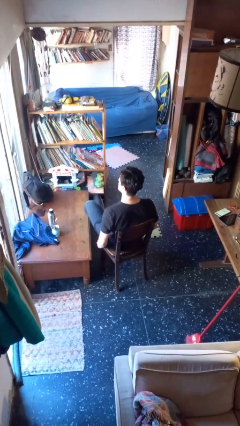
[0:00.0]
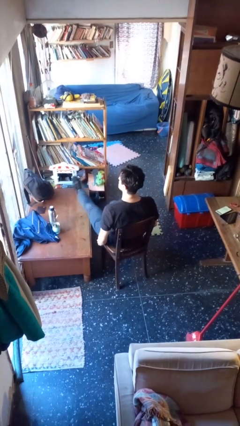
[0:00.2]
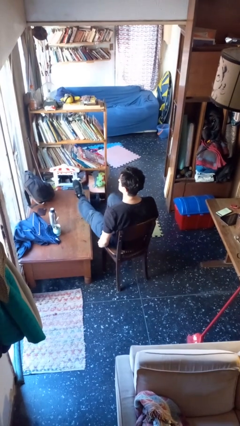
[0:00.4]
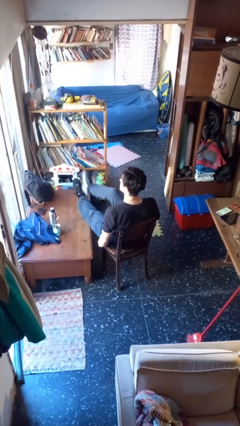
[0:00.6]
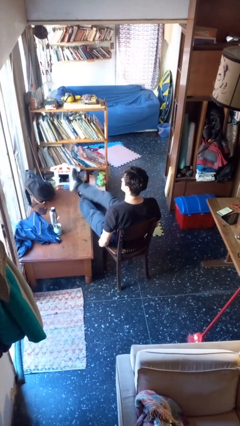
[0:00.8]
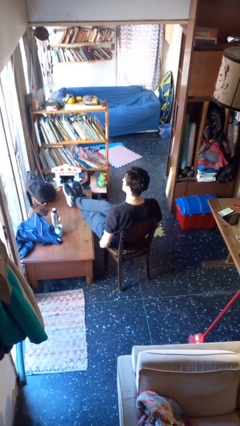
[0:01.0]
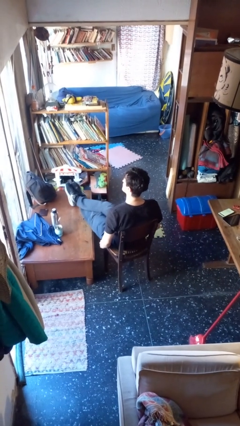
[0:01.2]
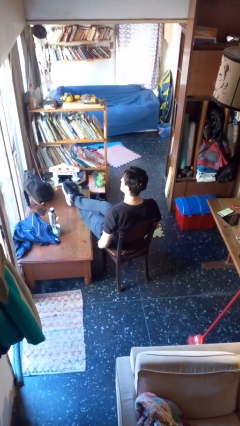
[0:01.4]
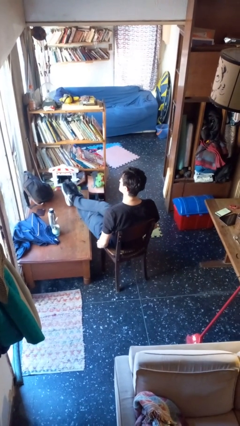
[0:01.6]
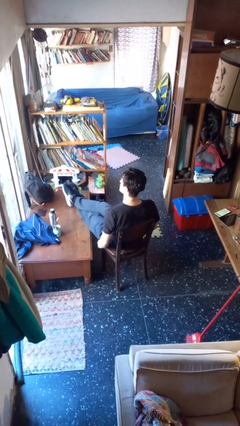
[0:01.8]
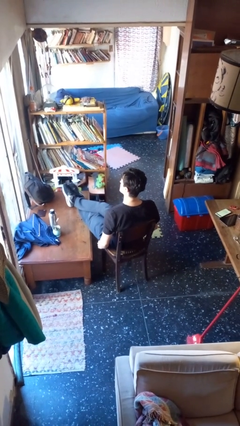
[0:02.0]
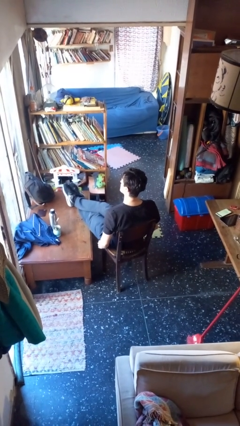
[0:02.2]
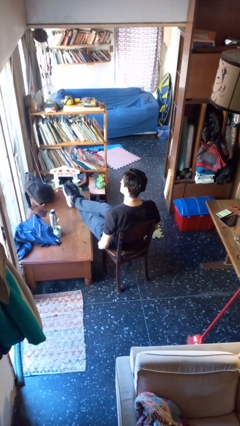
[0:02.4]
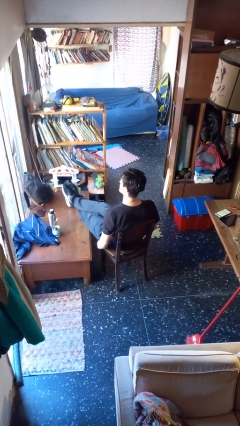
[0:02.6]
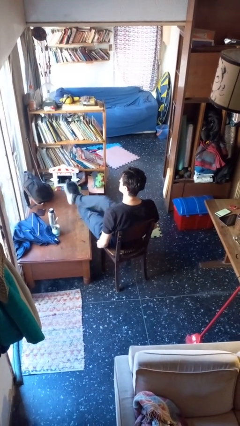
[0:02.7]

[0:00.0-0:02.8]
person puts feet up

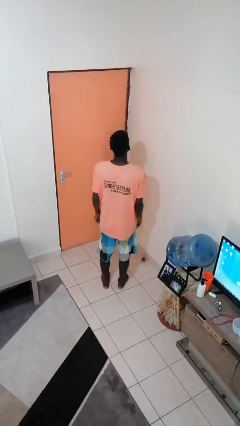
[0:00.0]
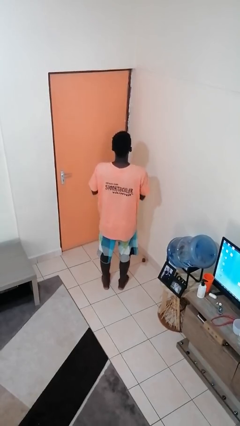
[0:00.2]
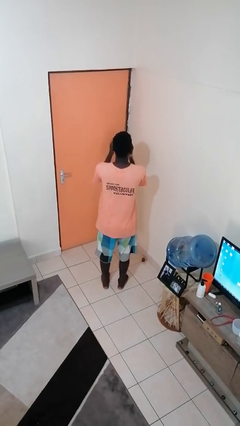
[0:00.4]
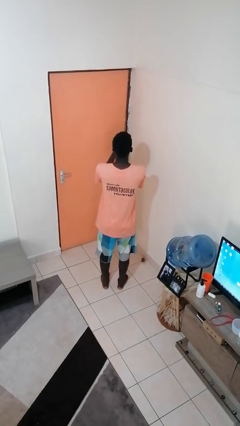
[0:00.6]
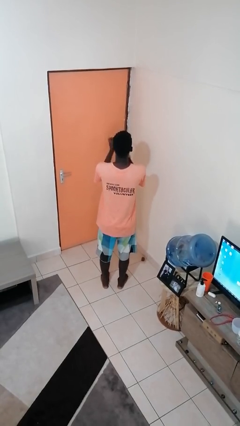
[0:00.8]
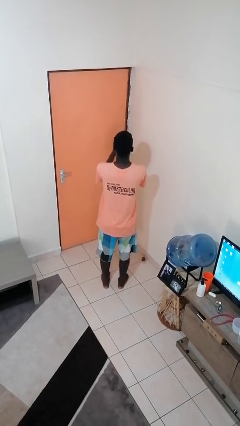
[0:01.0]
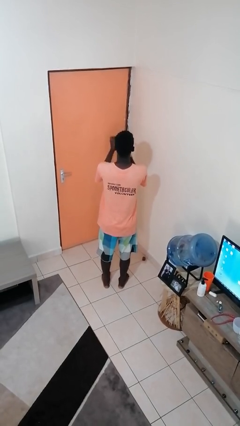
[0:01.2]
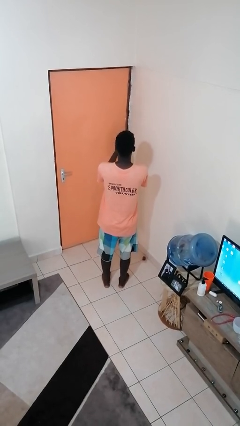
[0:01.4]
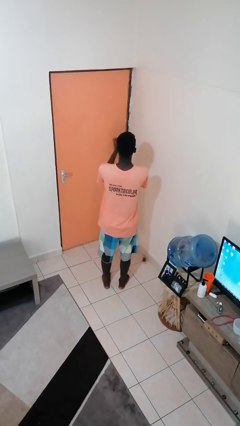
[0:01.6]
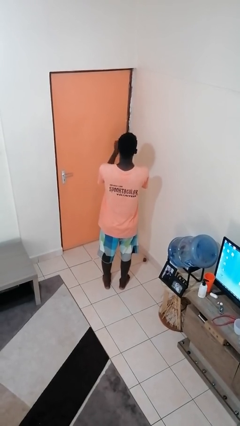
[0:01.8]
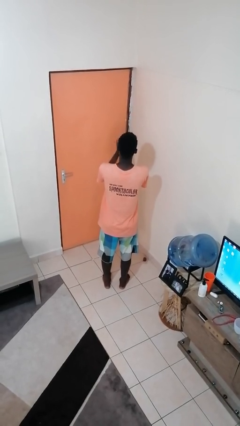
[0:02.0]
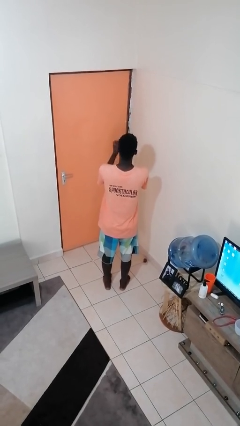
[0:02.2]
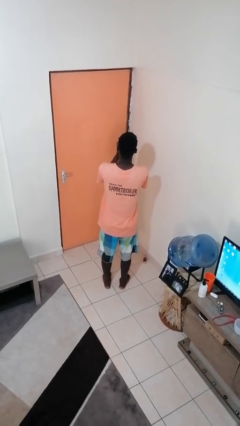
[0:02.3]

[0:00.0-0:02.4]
person claps hands

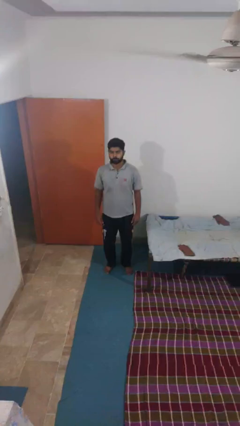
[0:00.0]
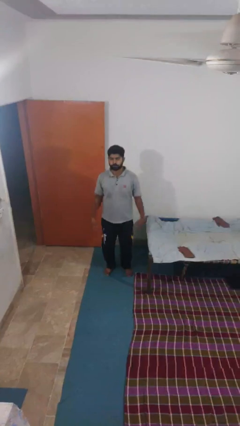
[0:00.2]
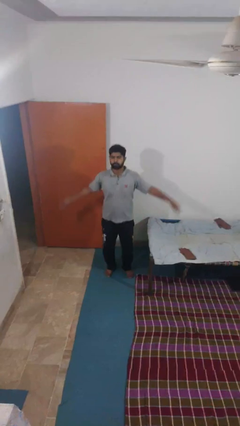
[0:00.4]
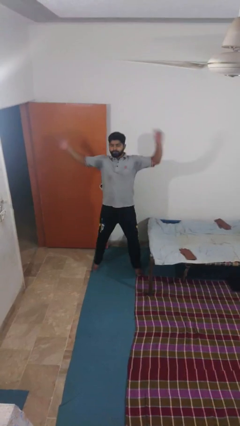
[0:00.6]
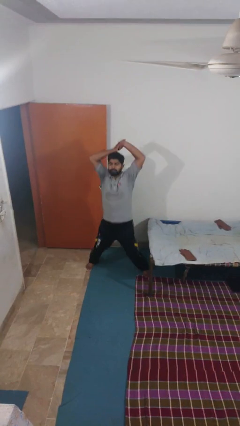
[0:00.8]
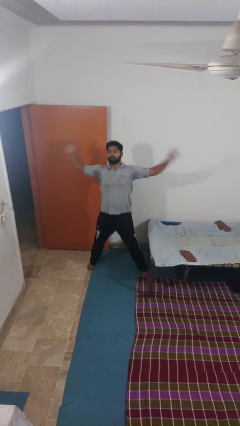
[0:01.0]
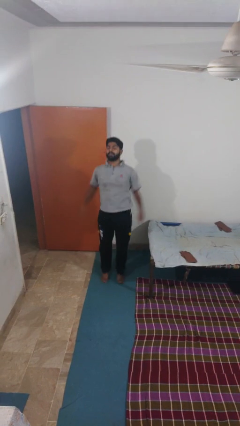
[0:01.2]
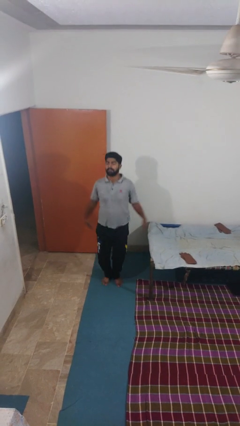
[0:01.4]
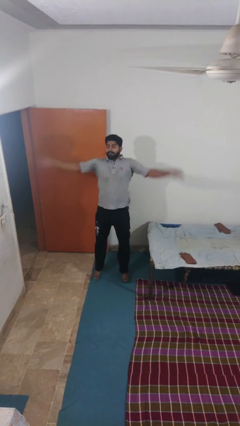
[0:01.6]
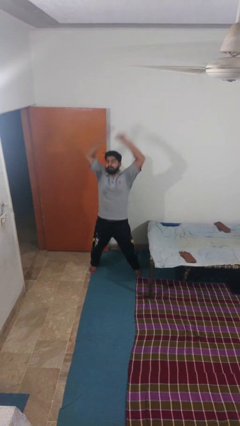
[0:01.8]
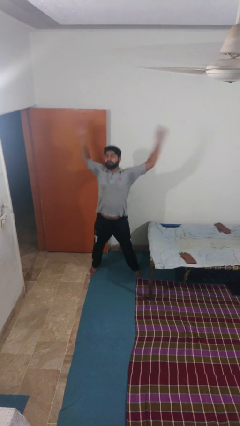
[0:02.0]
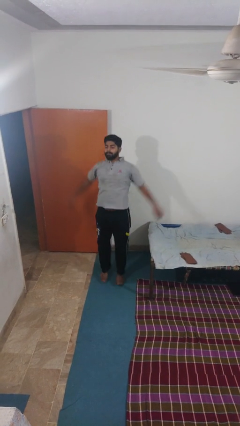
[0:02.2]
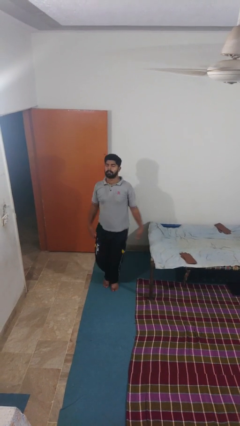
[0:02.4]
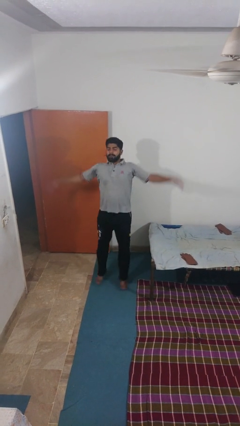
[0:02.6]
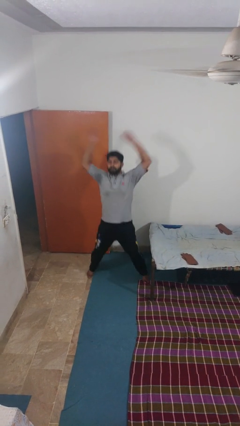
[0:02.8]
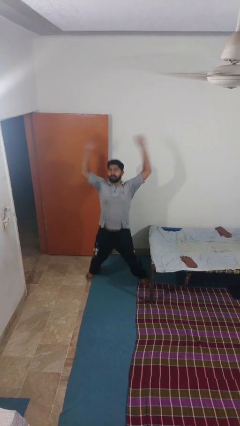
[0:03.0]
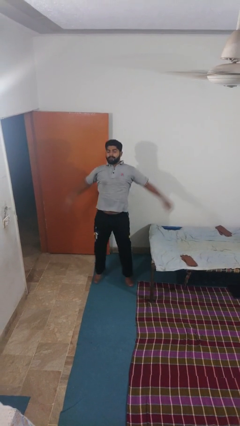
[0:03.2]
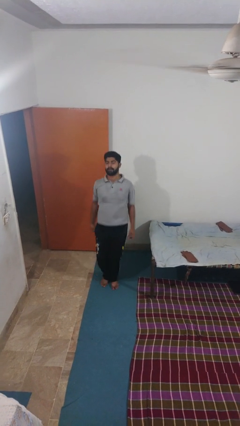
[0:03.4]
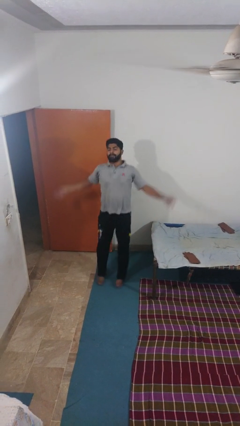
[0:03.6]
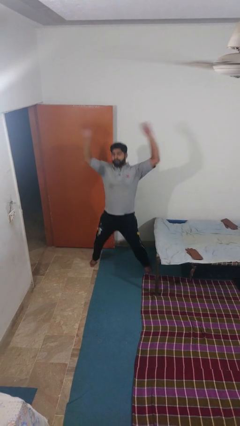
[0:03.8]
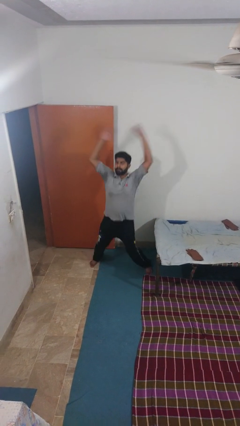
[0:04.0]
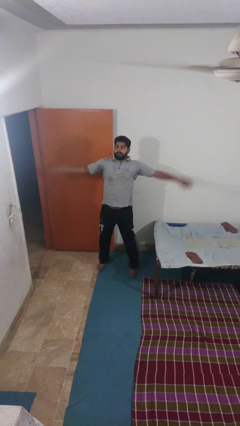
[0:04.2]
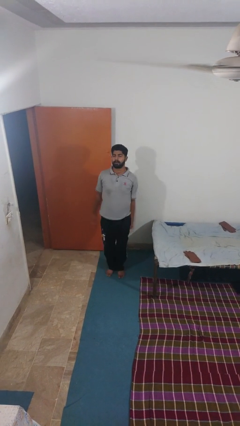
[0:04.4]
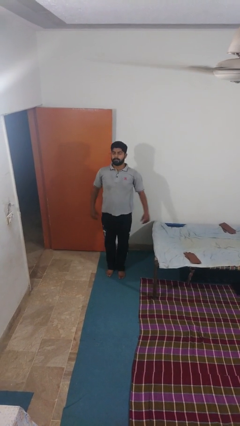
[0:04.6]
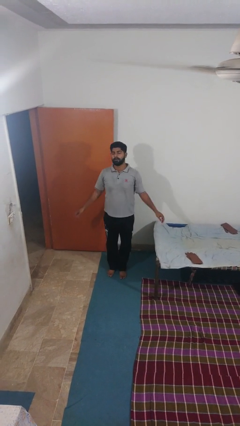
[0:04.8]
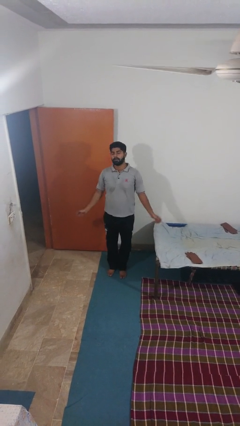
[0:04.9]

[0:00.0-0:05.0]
person exercises with jumping jacks

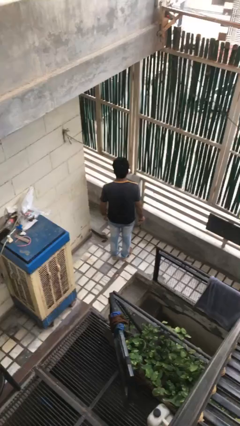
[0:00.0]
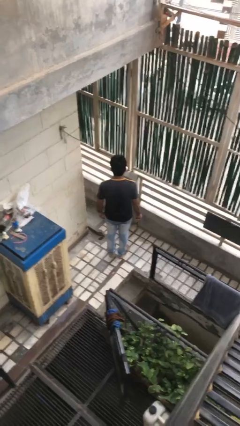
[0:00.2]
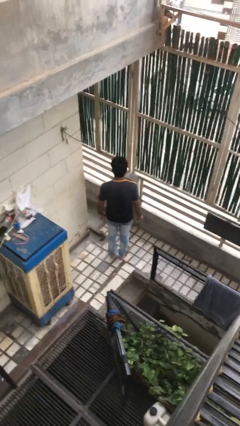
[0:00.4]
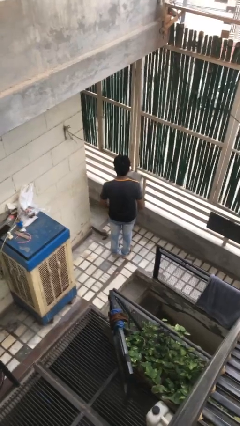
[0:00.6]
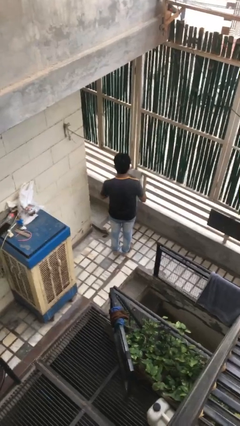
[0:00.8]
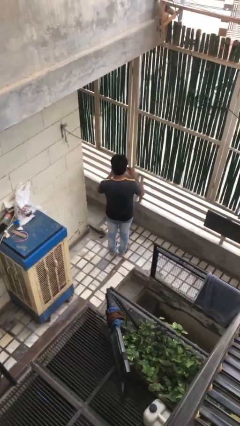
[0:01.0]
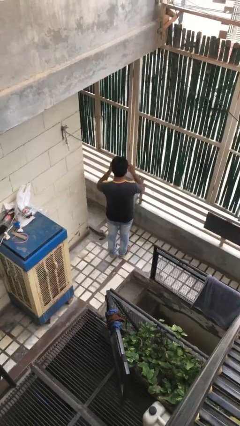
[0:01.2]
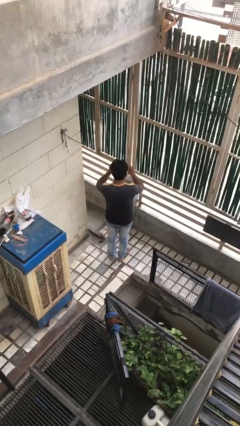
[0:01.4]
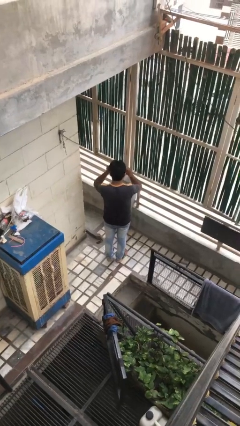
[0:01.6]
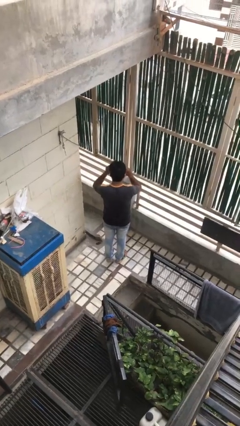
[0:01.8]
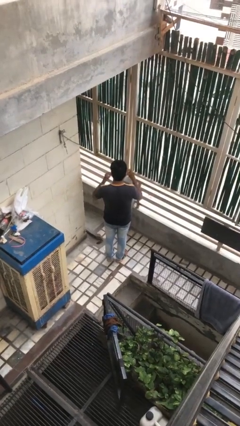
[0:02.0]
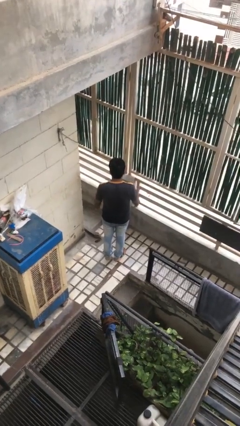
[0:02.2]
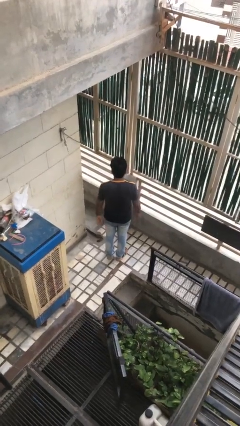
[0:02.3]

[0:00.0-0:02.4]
person puts on glasses

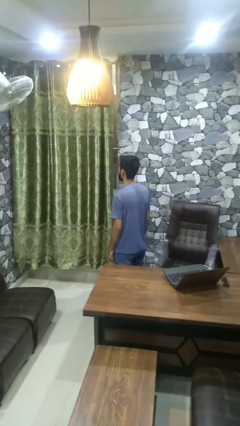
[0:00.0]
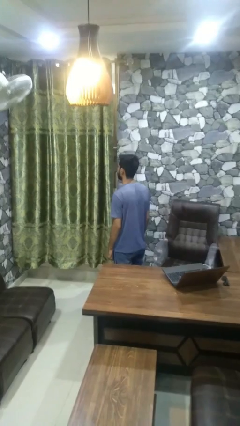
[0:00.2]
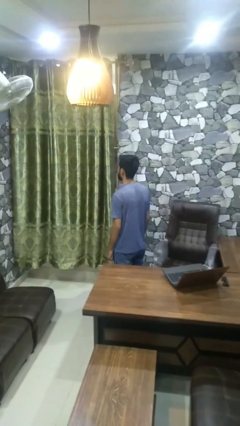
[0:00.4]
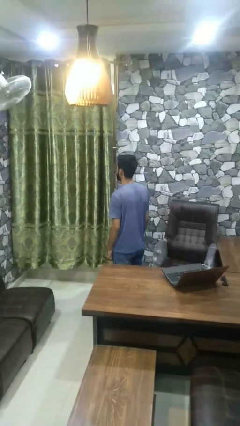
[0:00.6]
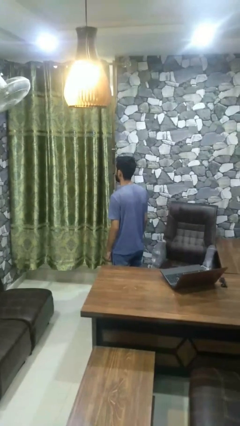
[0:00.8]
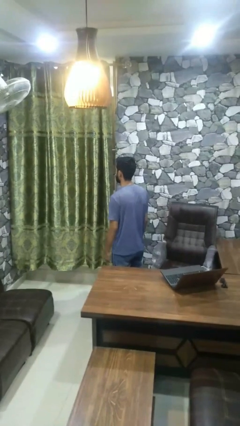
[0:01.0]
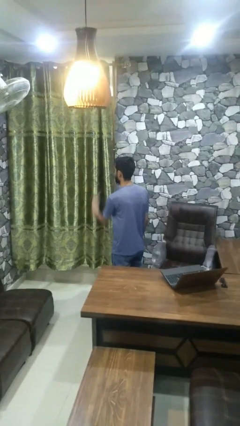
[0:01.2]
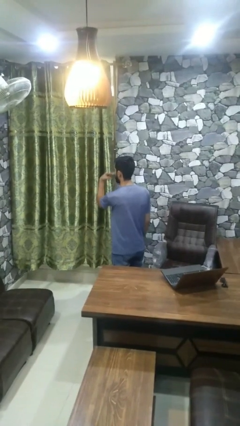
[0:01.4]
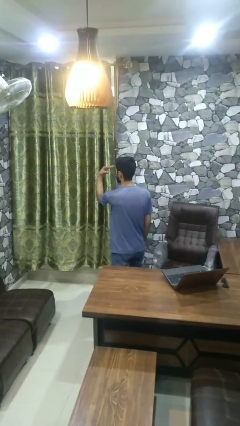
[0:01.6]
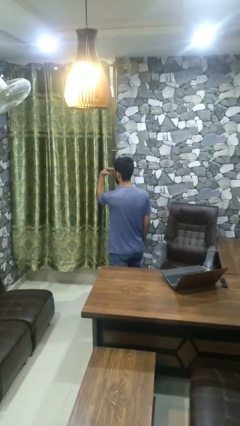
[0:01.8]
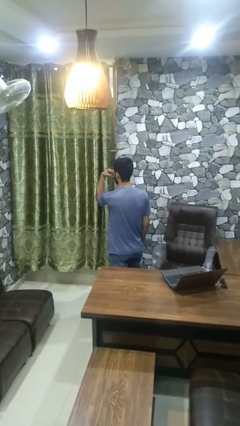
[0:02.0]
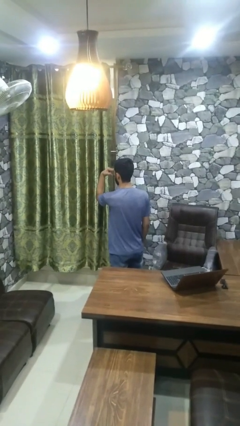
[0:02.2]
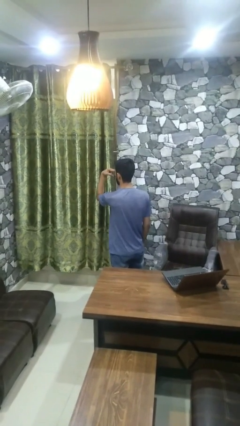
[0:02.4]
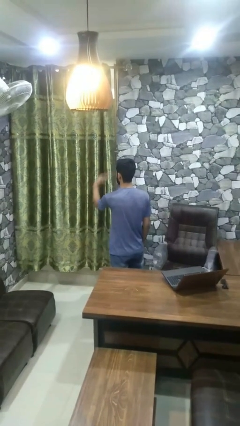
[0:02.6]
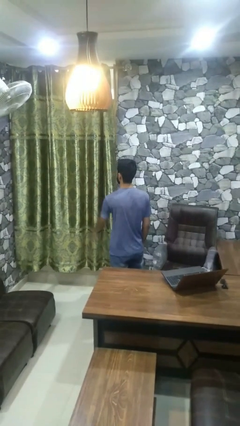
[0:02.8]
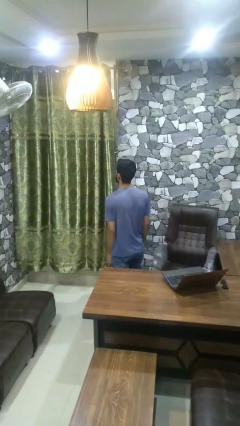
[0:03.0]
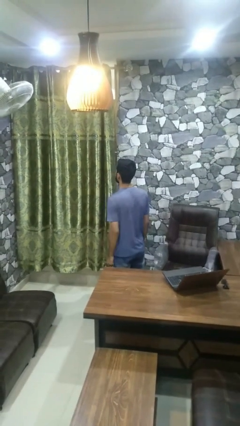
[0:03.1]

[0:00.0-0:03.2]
person gestures watch closely

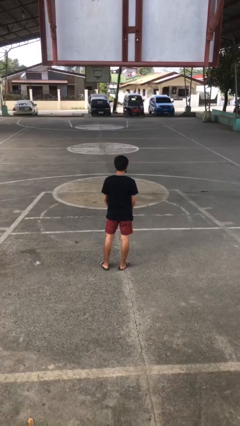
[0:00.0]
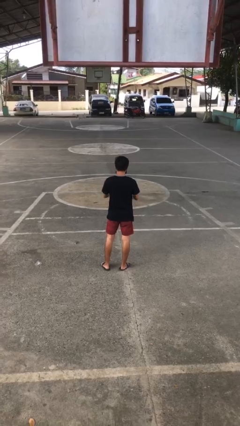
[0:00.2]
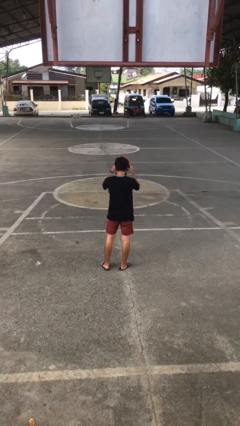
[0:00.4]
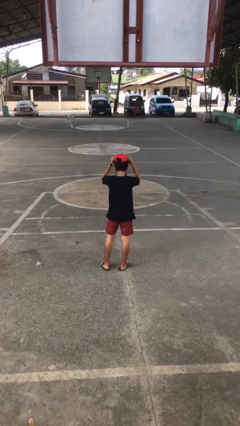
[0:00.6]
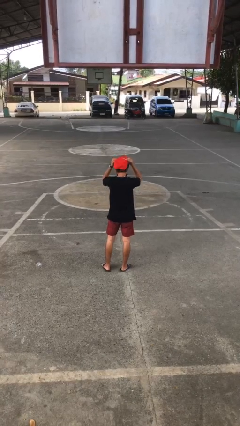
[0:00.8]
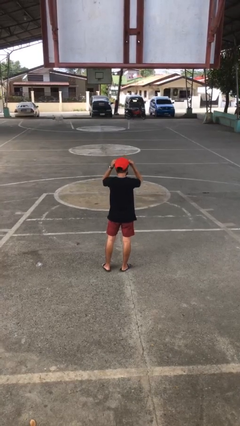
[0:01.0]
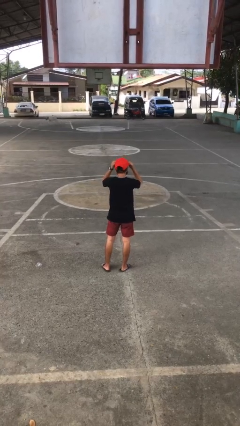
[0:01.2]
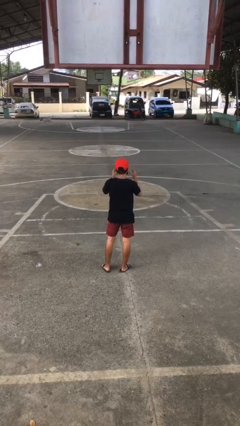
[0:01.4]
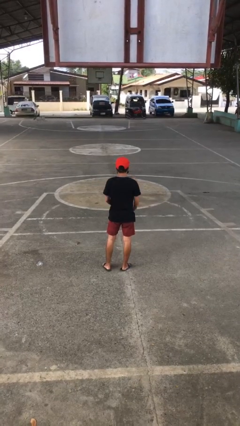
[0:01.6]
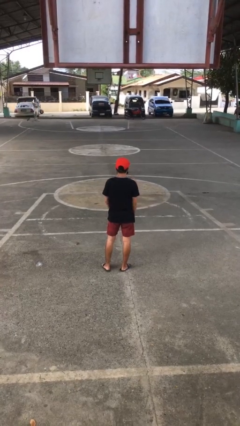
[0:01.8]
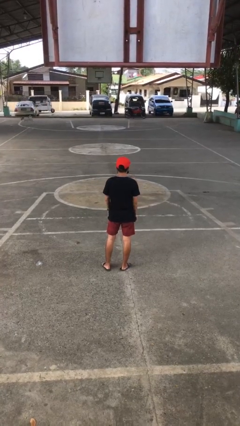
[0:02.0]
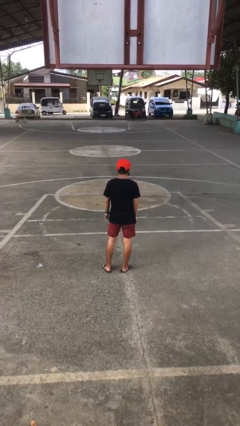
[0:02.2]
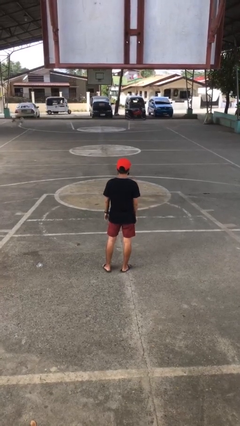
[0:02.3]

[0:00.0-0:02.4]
person puts on hat
